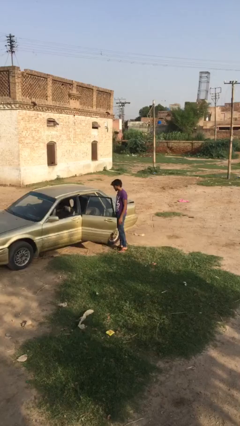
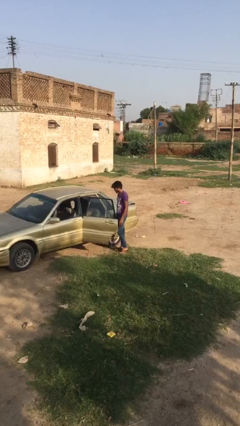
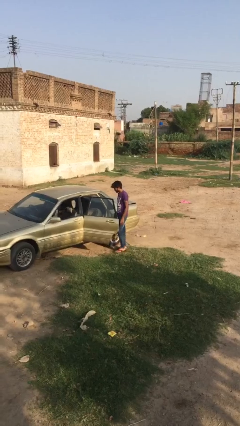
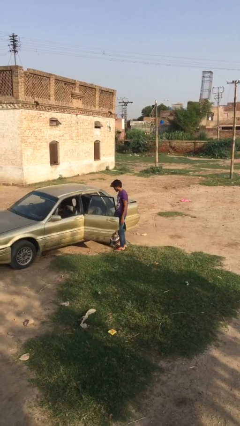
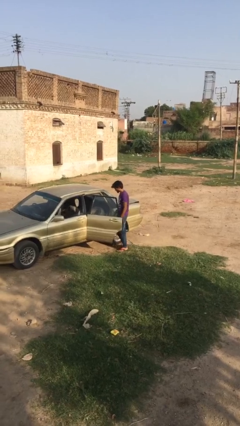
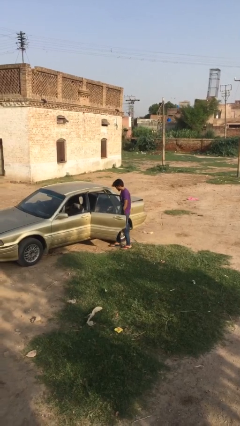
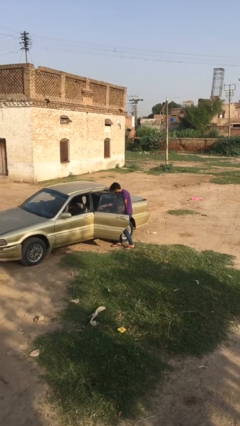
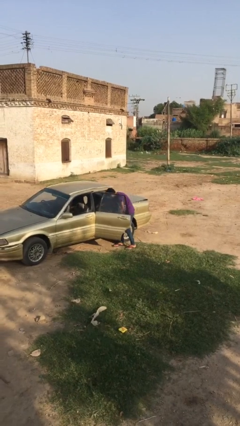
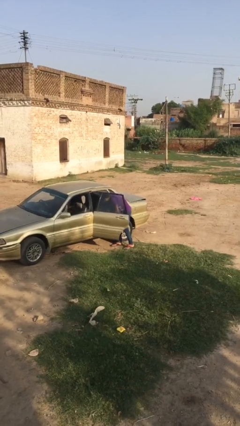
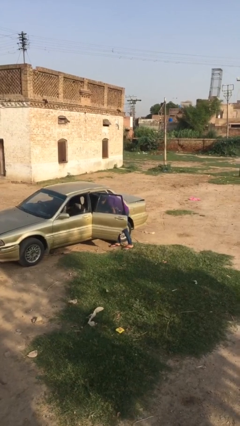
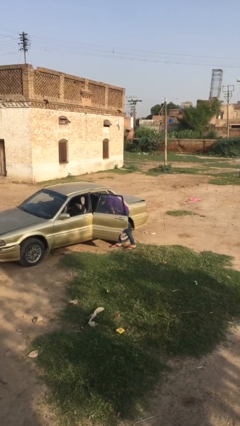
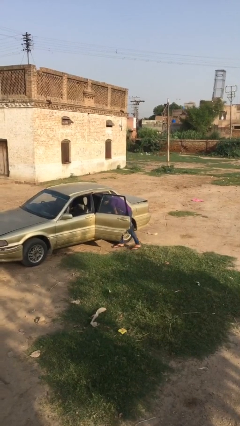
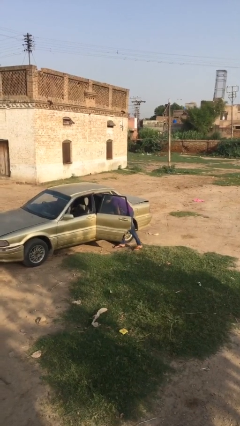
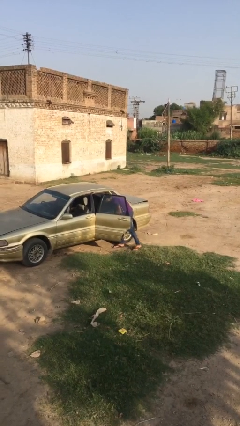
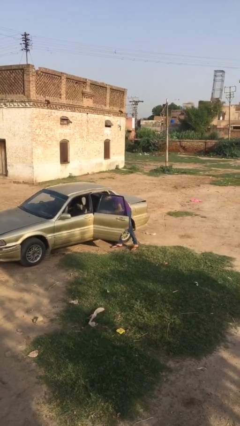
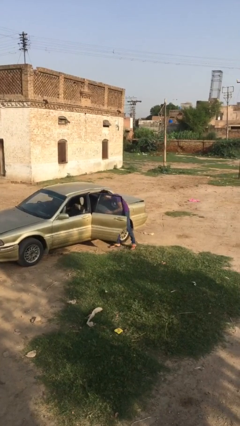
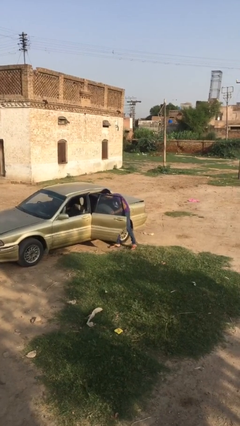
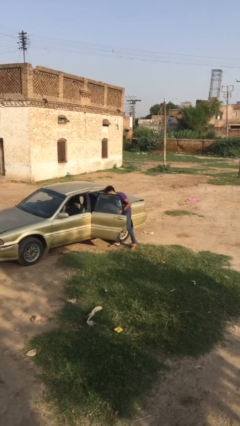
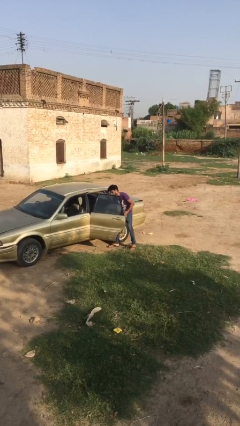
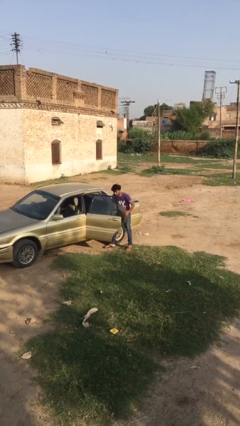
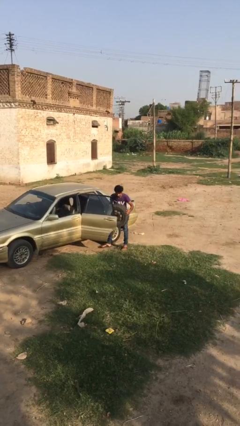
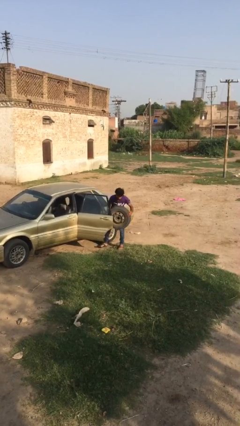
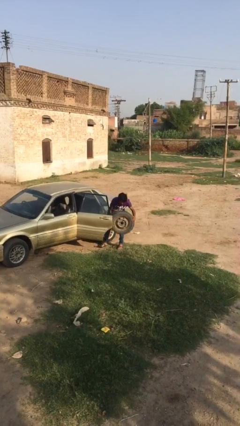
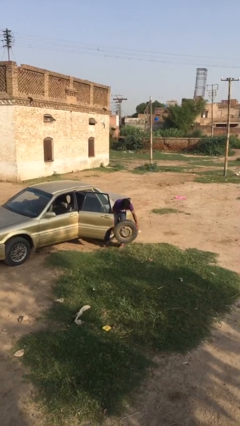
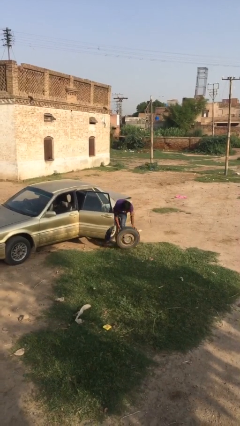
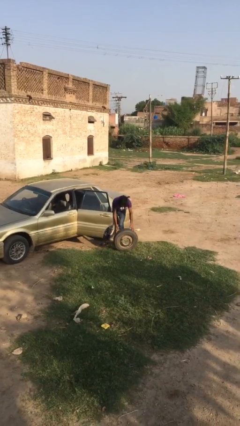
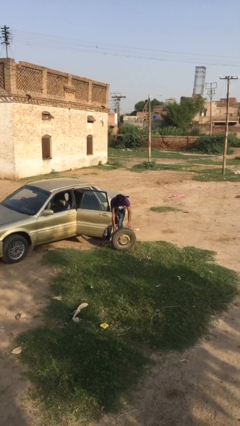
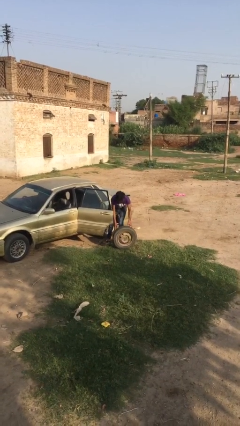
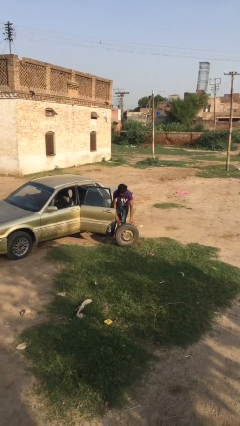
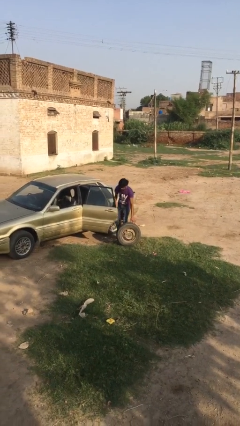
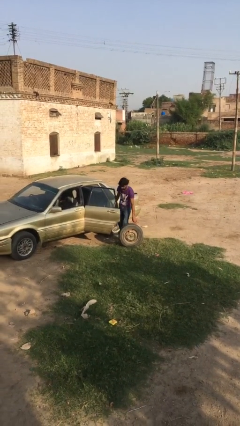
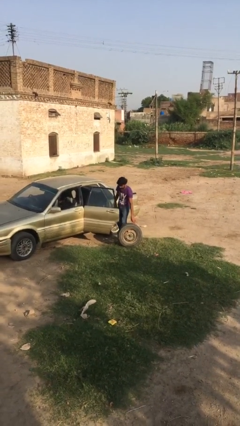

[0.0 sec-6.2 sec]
person unloads car

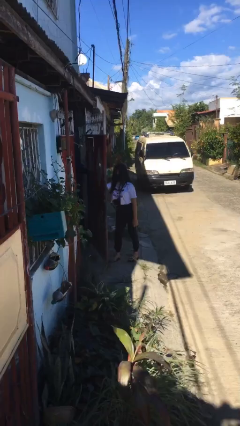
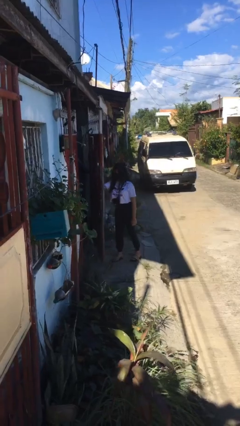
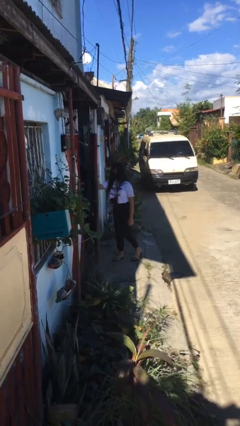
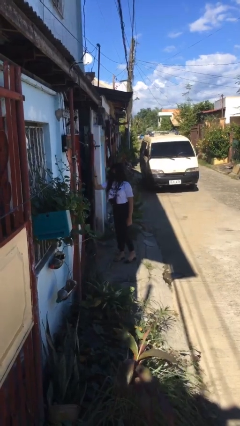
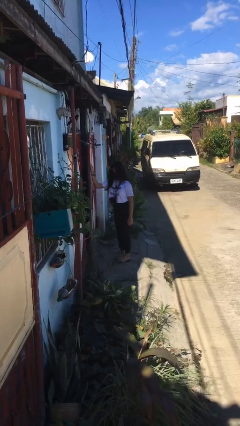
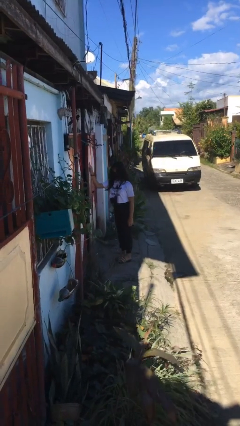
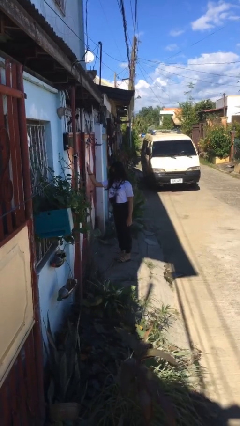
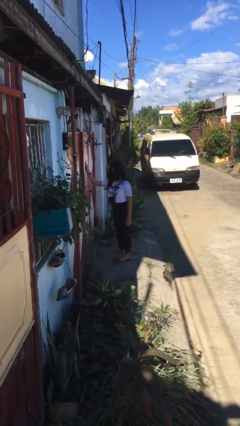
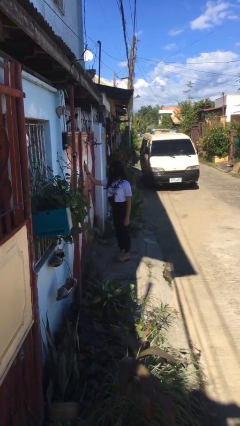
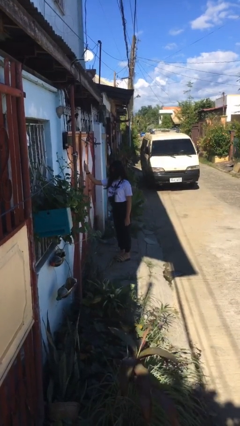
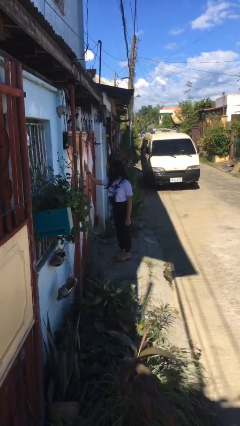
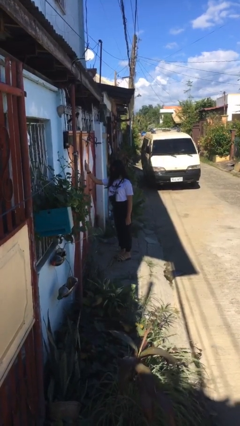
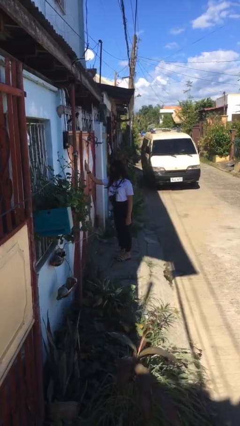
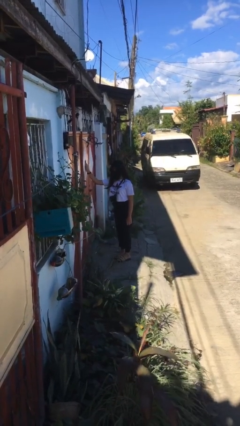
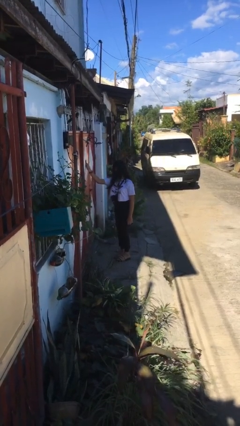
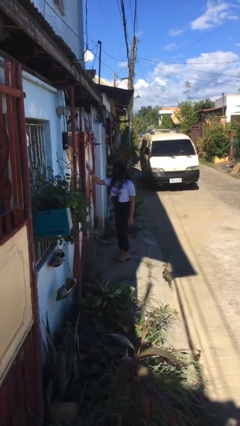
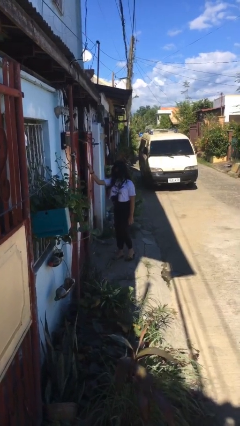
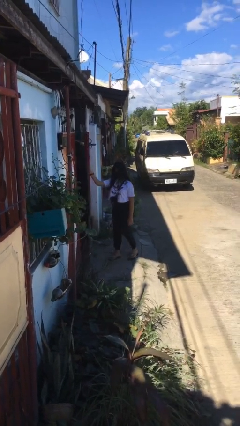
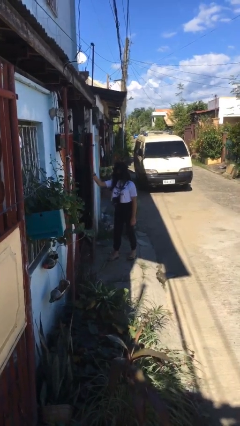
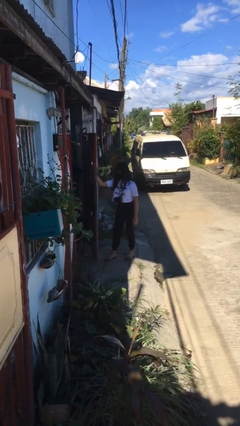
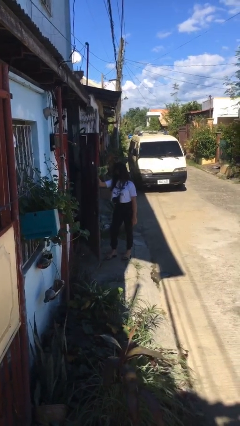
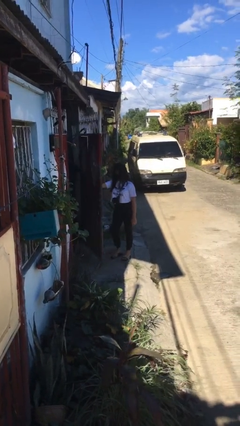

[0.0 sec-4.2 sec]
person closes gate

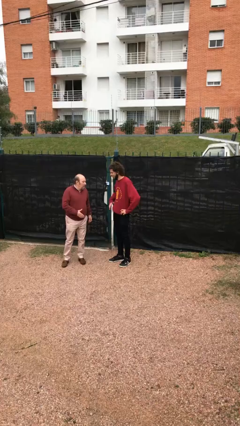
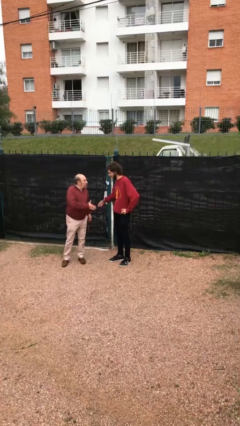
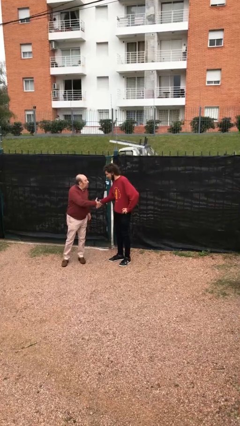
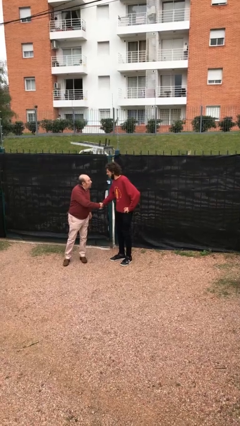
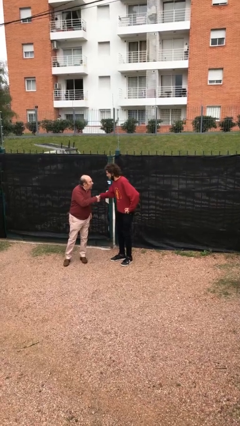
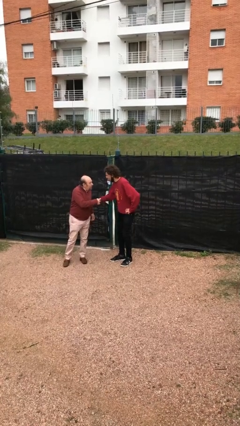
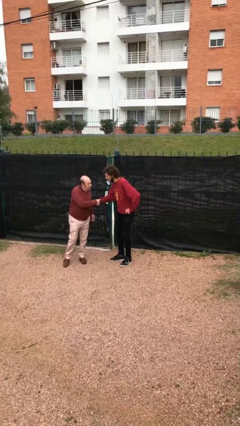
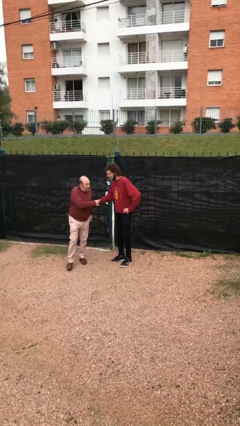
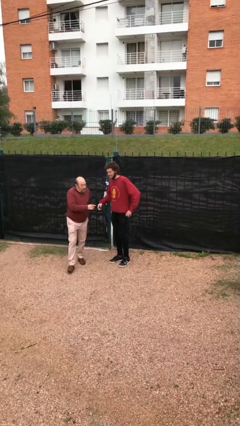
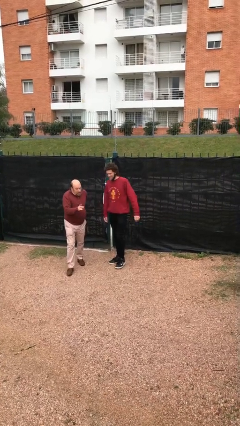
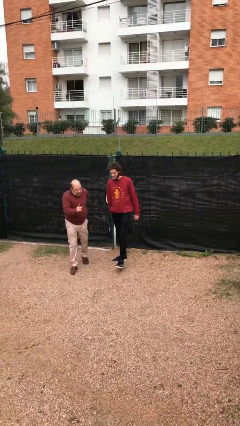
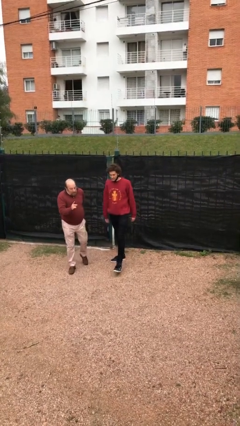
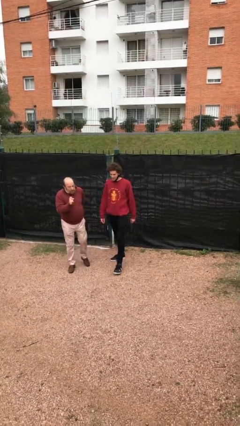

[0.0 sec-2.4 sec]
person shakes hand

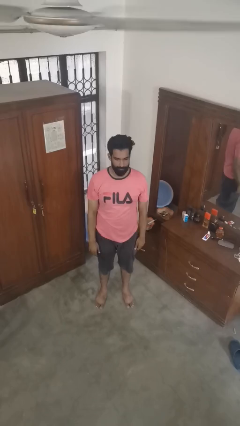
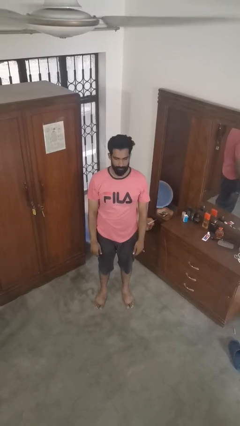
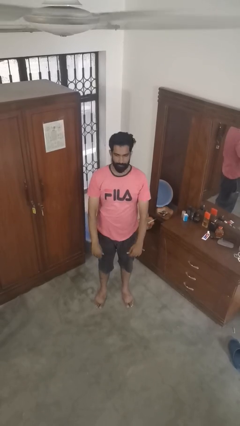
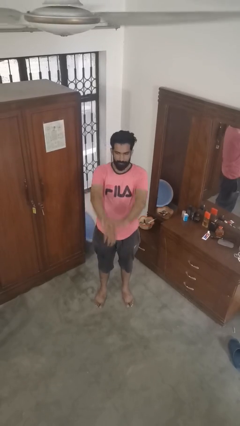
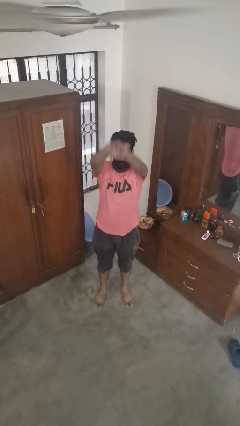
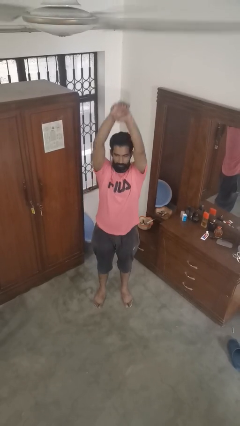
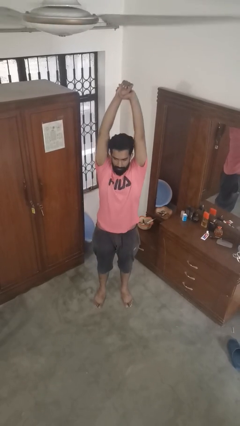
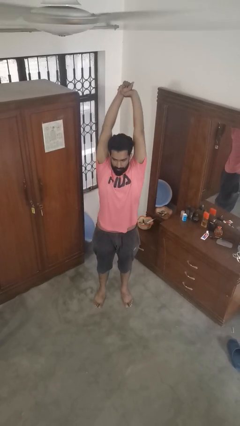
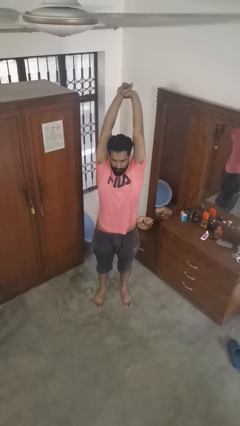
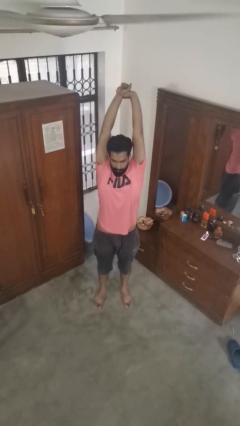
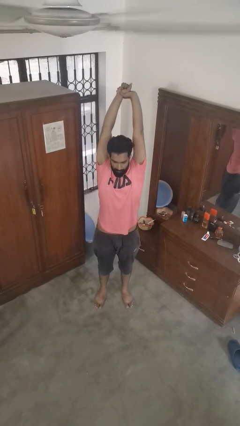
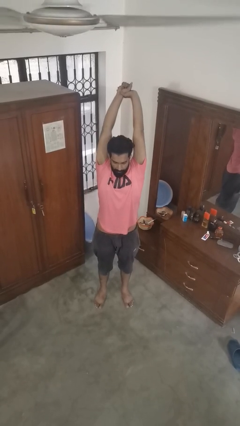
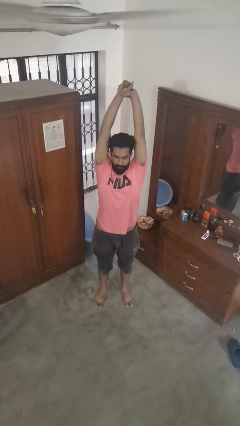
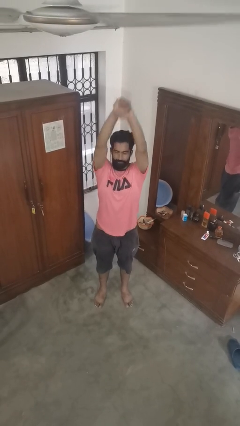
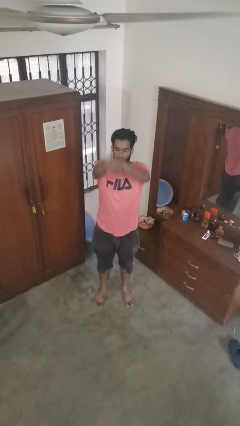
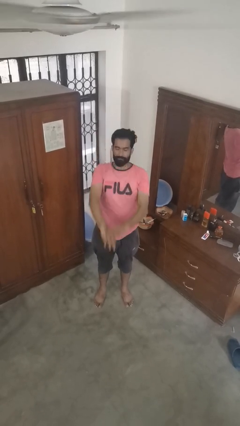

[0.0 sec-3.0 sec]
person stretches arms over head

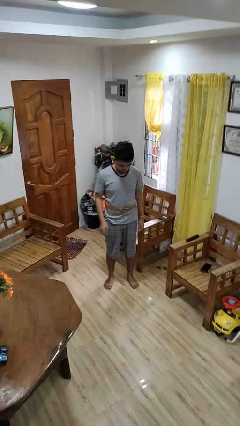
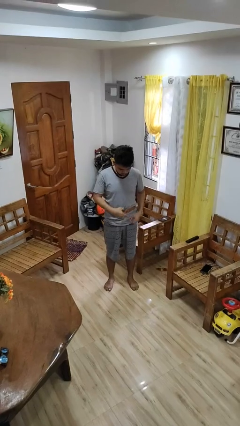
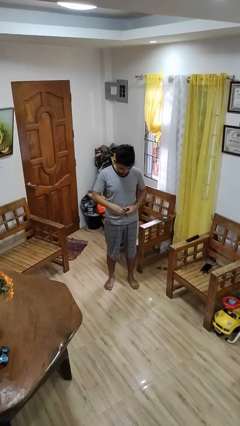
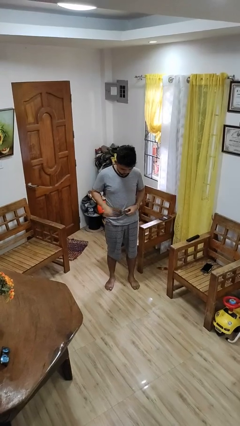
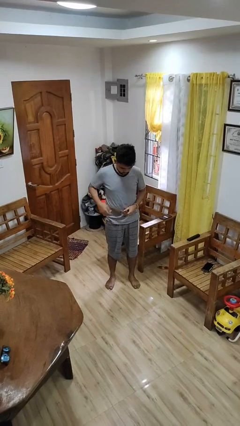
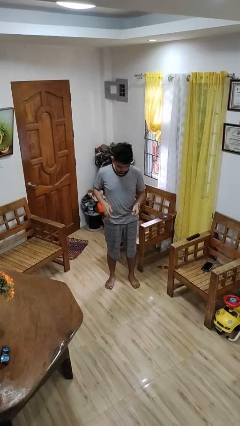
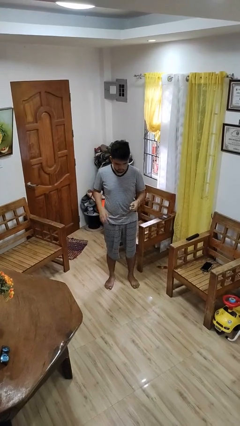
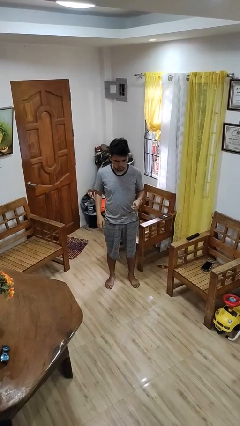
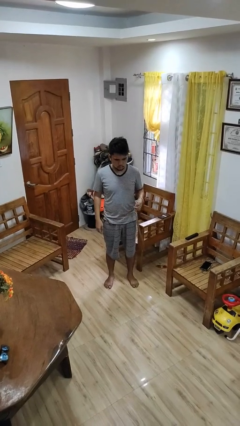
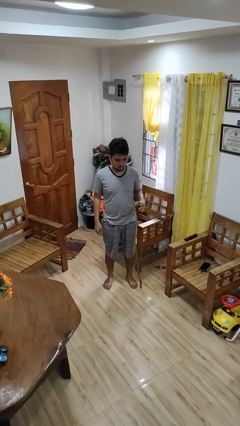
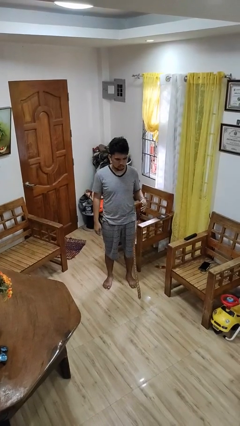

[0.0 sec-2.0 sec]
person takes off belt
